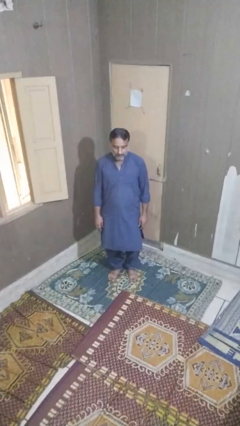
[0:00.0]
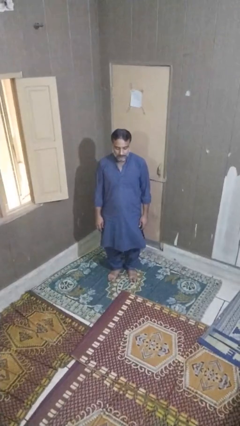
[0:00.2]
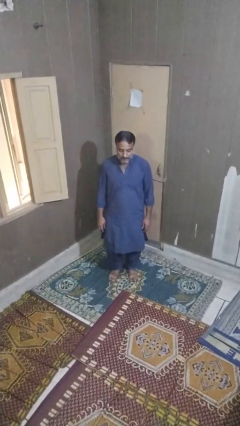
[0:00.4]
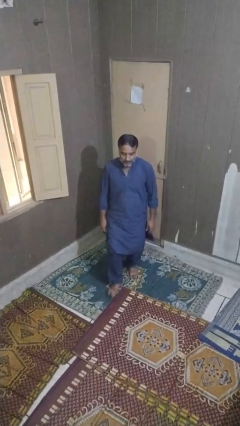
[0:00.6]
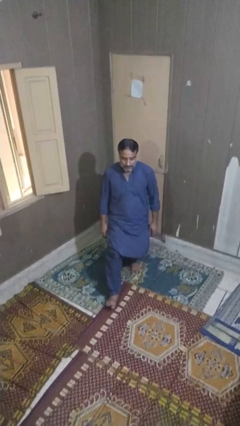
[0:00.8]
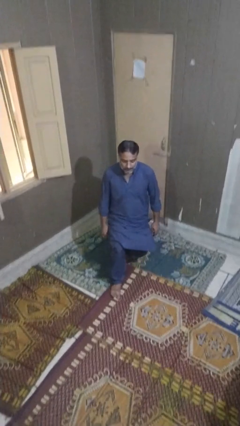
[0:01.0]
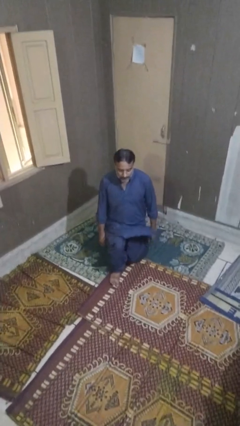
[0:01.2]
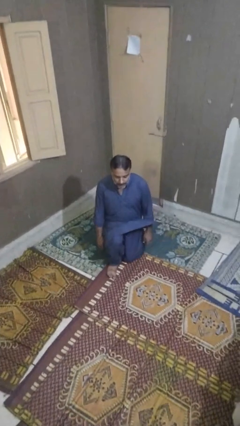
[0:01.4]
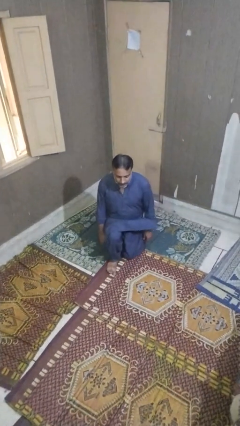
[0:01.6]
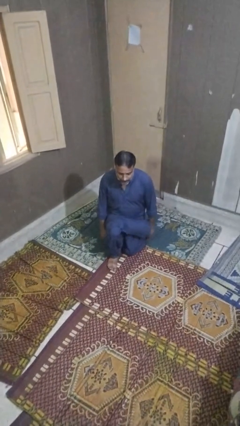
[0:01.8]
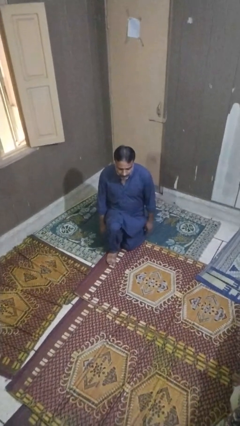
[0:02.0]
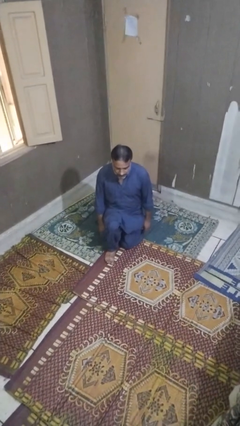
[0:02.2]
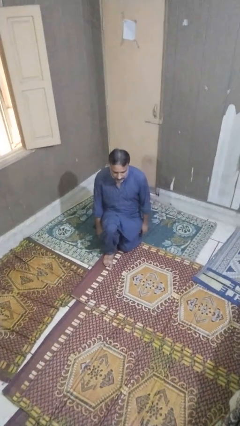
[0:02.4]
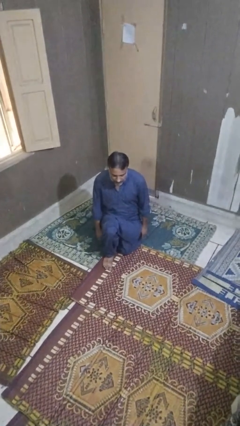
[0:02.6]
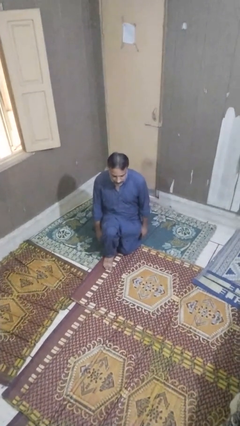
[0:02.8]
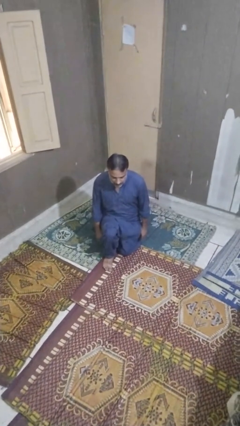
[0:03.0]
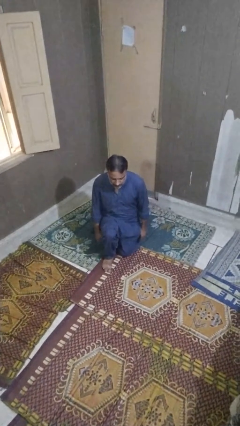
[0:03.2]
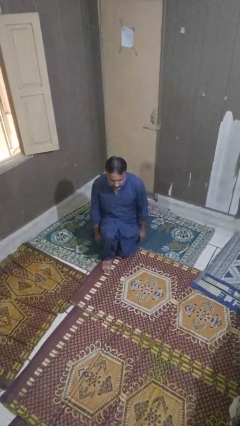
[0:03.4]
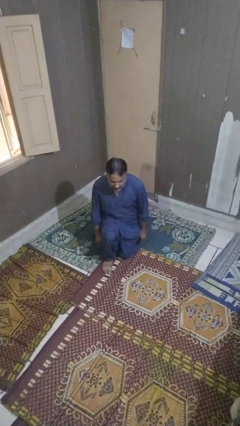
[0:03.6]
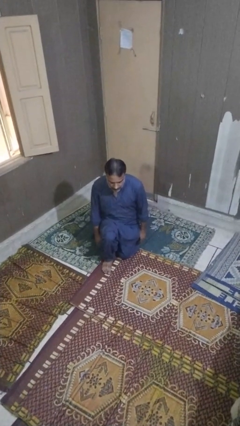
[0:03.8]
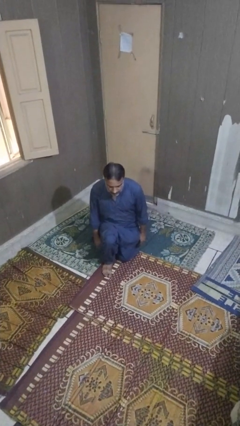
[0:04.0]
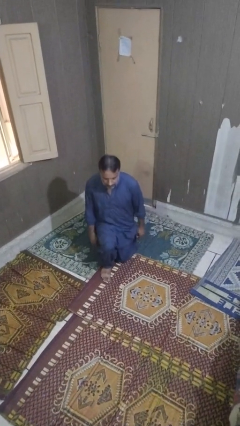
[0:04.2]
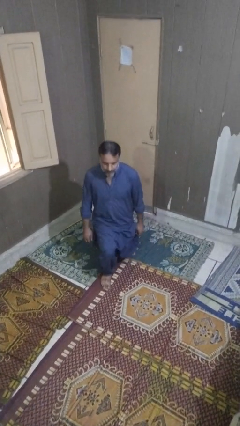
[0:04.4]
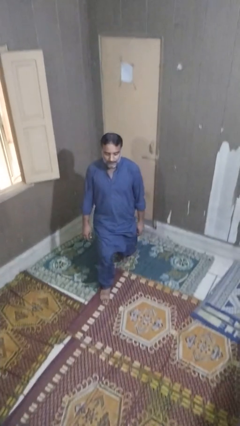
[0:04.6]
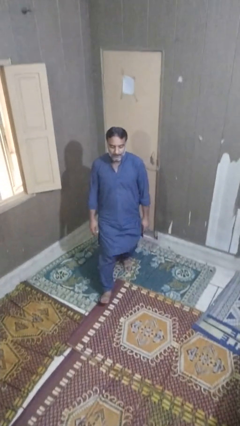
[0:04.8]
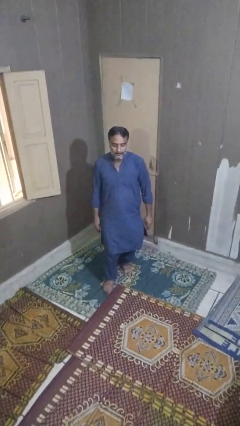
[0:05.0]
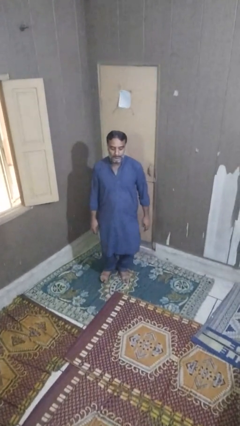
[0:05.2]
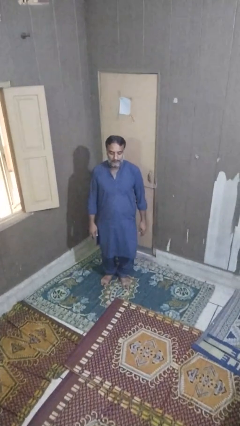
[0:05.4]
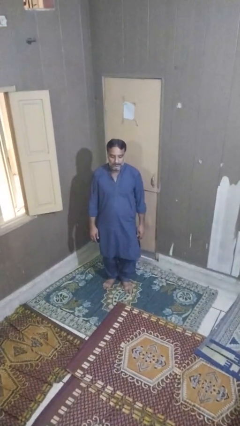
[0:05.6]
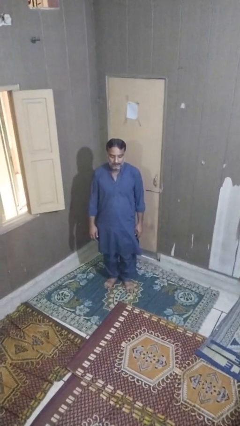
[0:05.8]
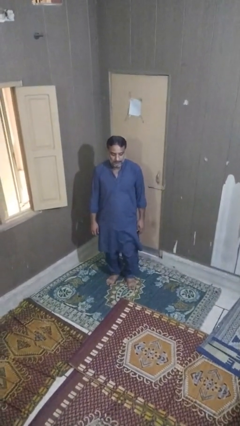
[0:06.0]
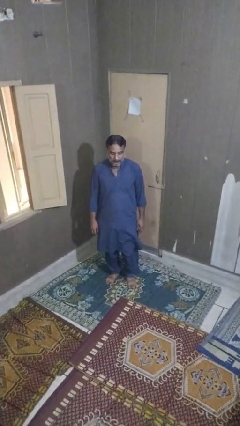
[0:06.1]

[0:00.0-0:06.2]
person exercises with lunges

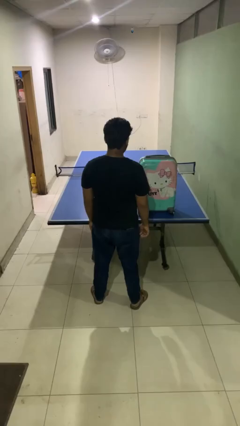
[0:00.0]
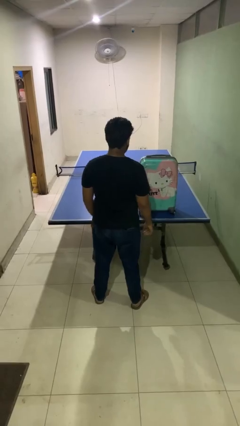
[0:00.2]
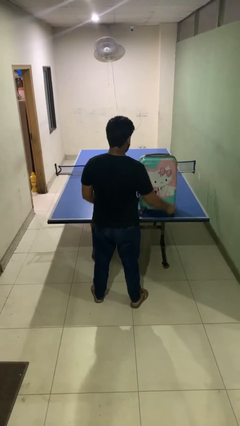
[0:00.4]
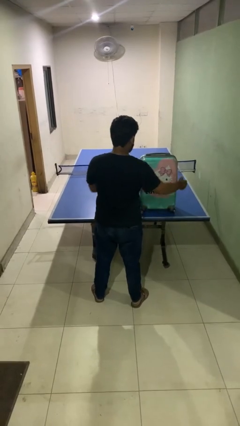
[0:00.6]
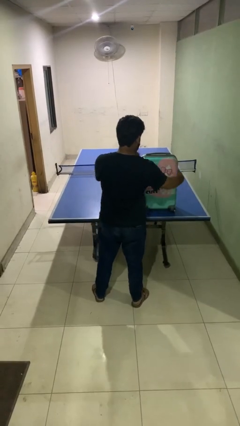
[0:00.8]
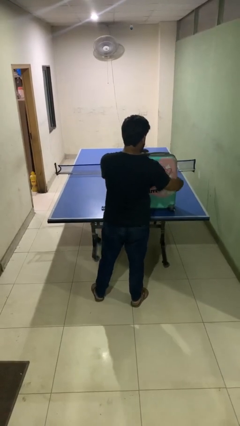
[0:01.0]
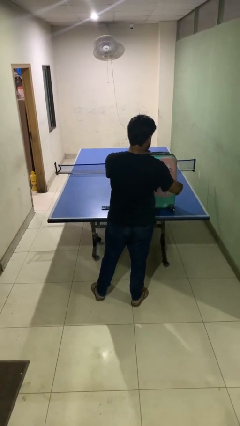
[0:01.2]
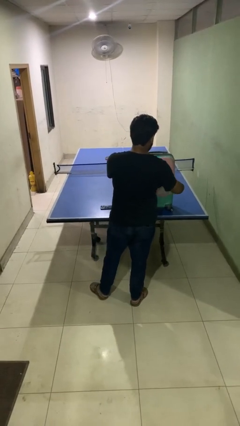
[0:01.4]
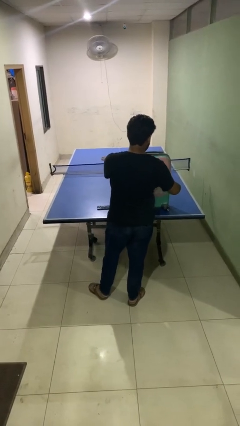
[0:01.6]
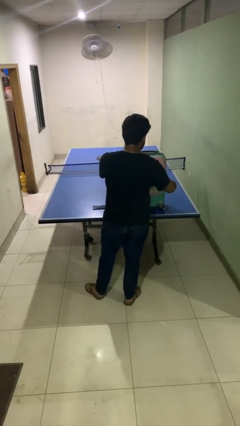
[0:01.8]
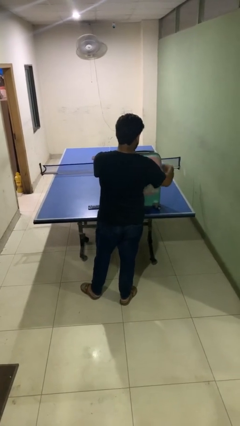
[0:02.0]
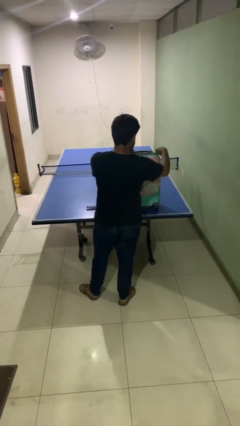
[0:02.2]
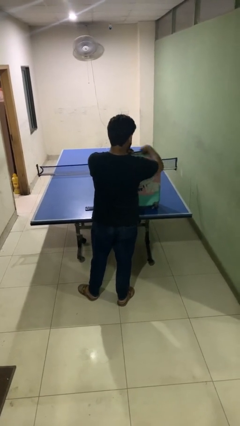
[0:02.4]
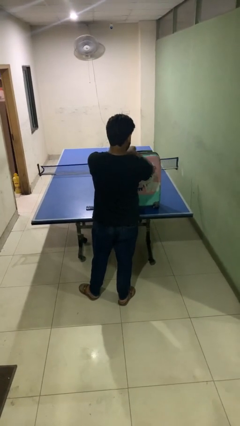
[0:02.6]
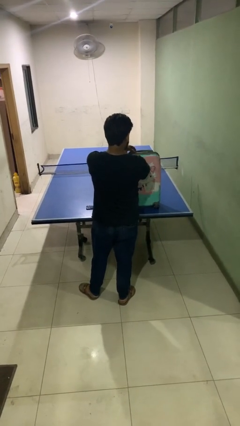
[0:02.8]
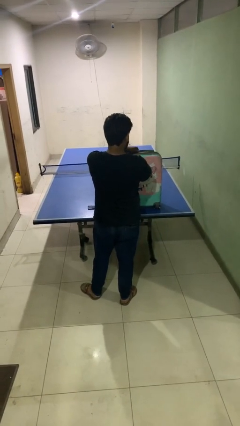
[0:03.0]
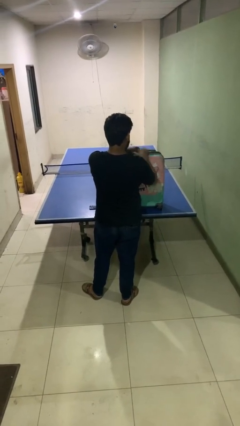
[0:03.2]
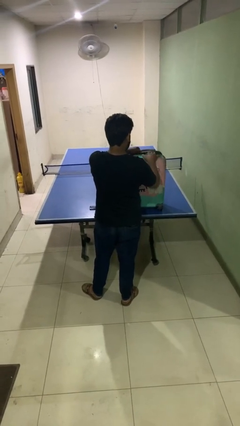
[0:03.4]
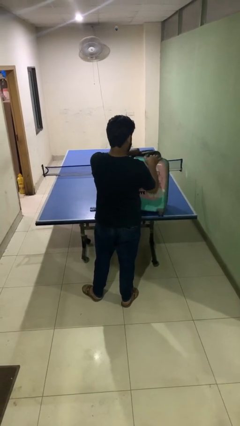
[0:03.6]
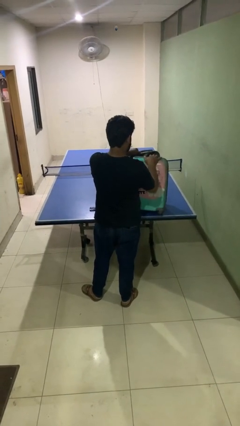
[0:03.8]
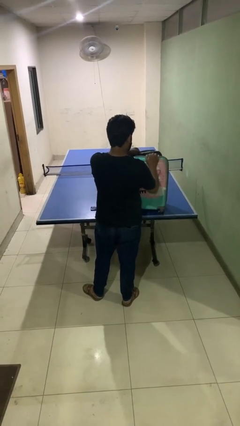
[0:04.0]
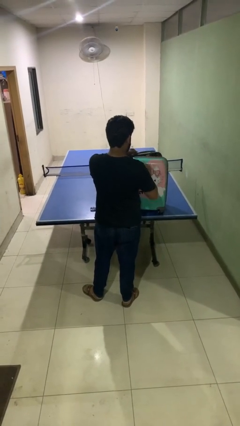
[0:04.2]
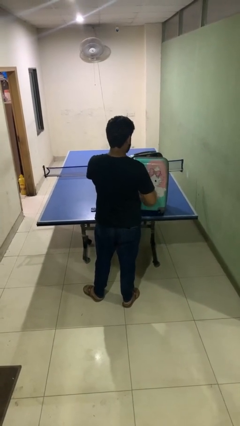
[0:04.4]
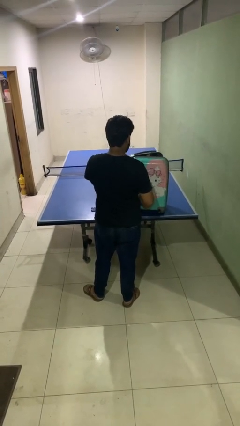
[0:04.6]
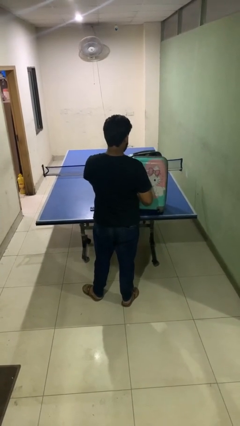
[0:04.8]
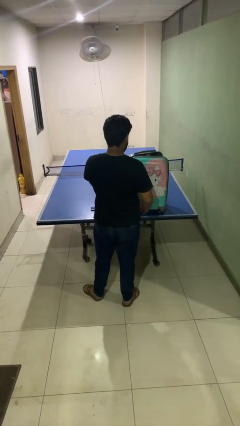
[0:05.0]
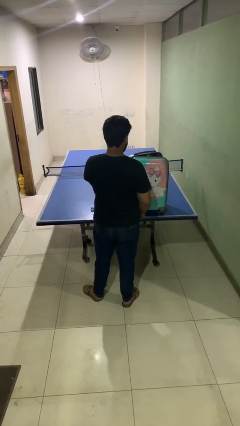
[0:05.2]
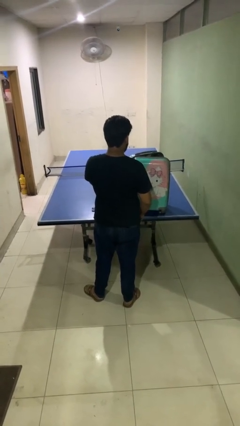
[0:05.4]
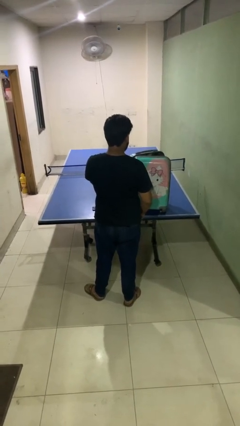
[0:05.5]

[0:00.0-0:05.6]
person opens suitcase

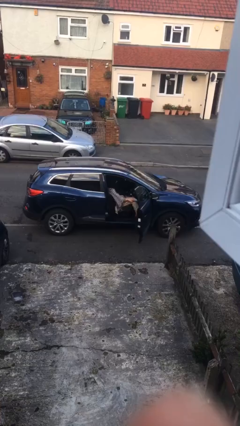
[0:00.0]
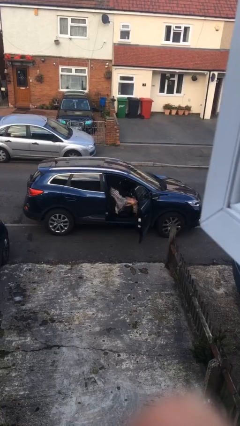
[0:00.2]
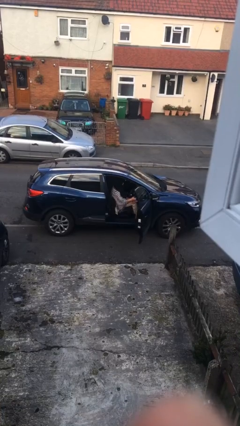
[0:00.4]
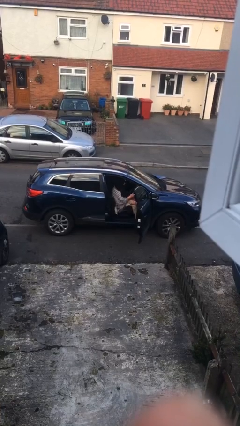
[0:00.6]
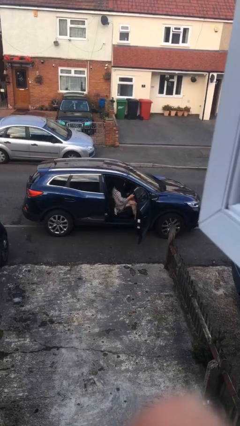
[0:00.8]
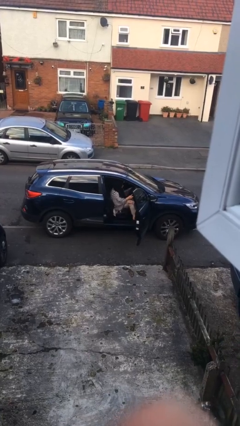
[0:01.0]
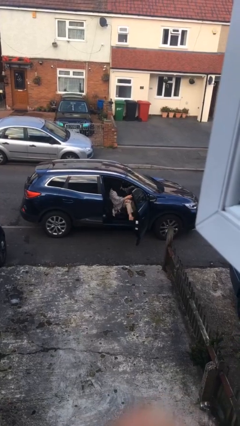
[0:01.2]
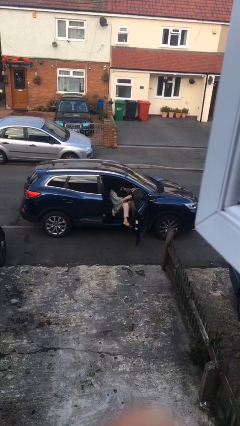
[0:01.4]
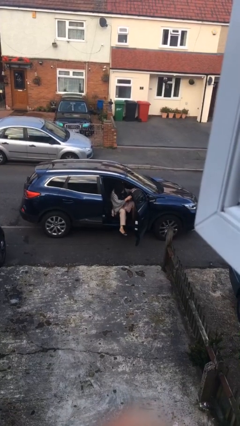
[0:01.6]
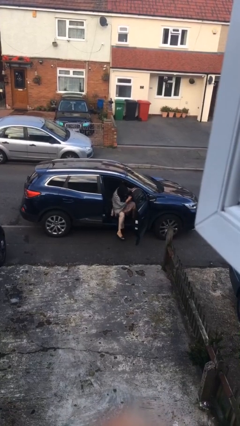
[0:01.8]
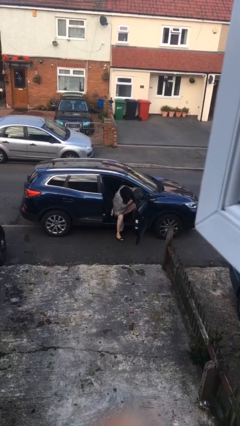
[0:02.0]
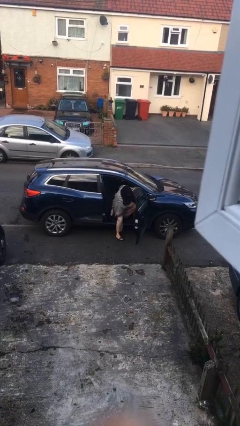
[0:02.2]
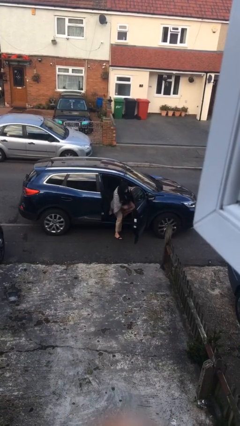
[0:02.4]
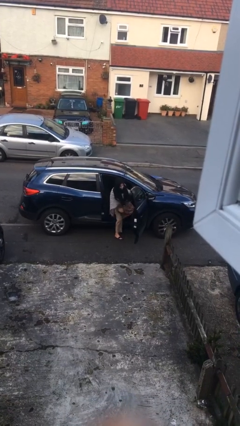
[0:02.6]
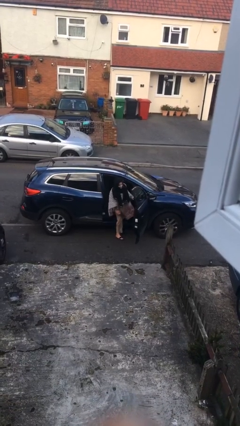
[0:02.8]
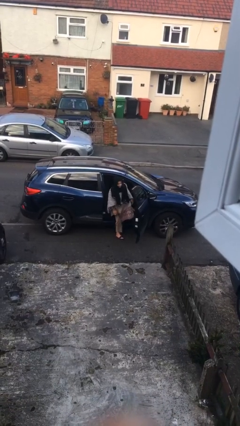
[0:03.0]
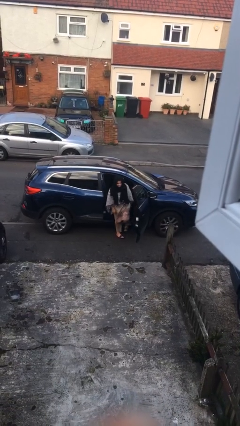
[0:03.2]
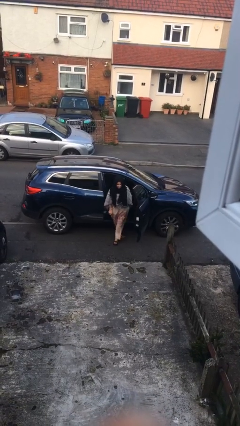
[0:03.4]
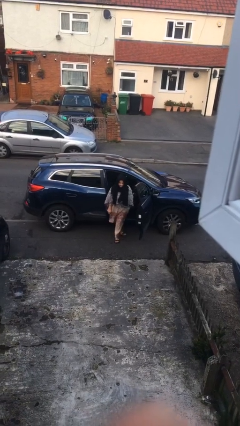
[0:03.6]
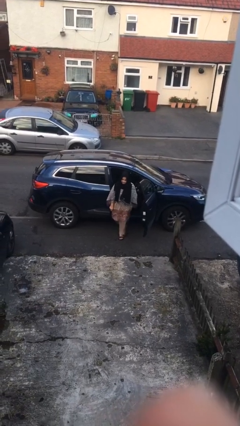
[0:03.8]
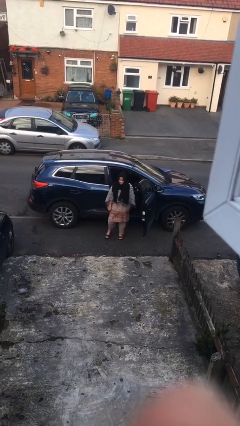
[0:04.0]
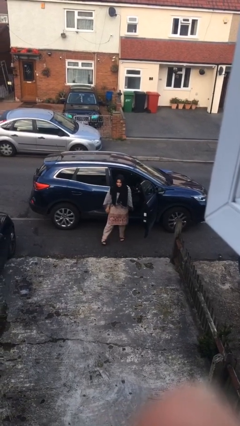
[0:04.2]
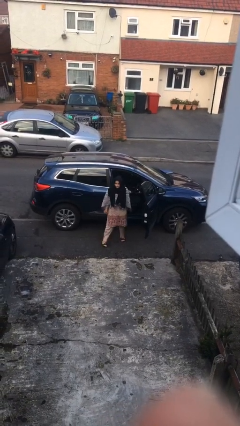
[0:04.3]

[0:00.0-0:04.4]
person exits car

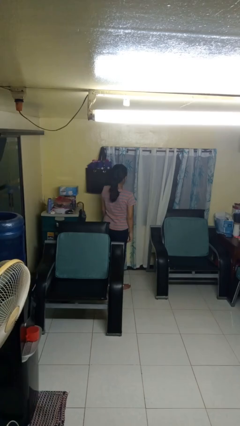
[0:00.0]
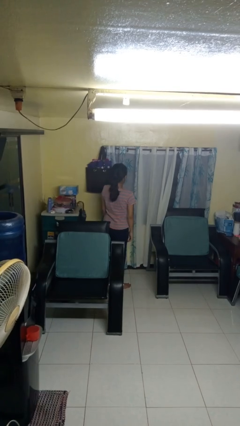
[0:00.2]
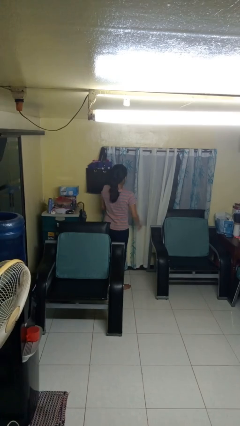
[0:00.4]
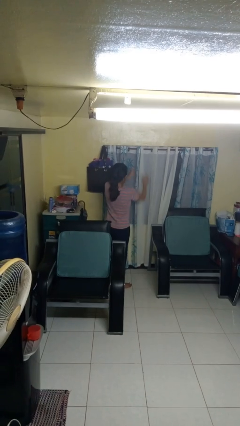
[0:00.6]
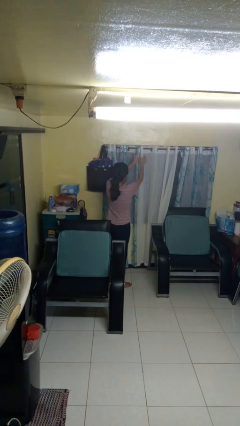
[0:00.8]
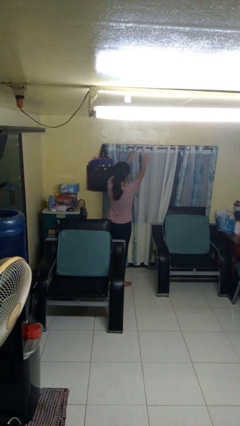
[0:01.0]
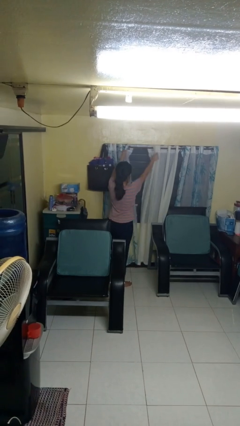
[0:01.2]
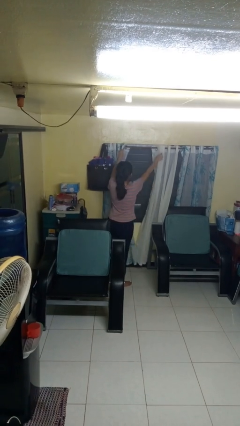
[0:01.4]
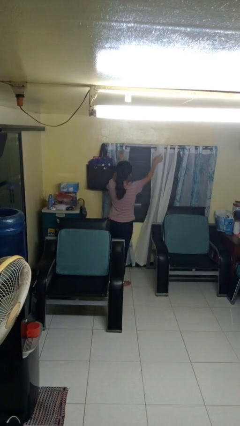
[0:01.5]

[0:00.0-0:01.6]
person opens curtains
